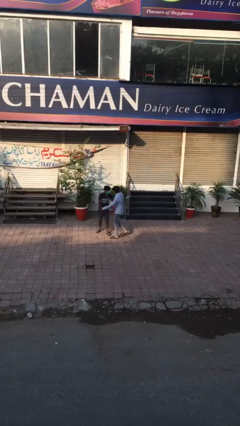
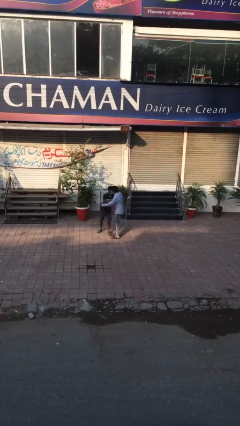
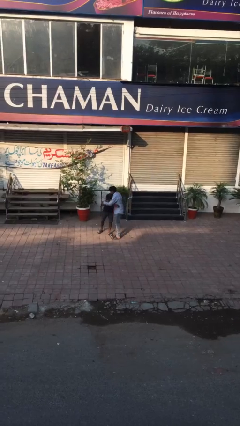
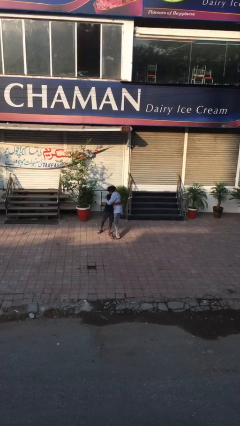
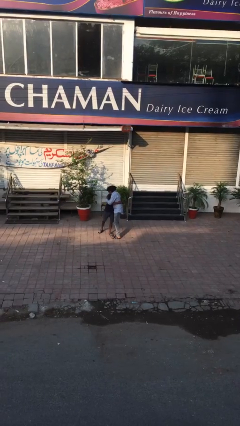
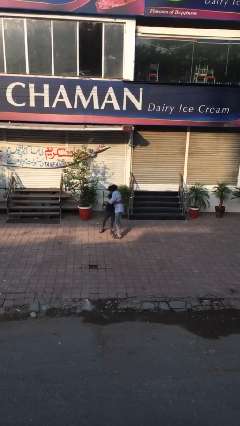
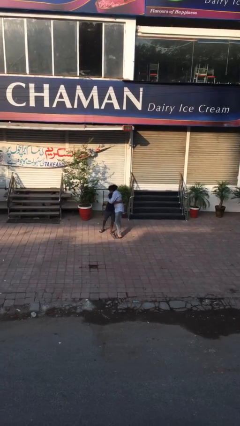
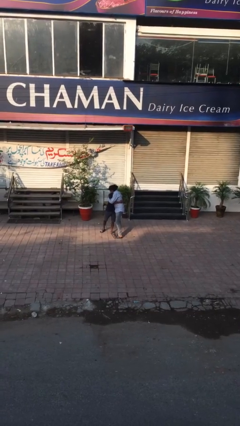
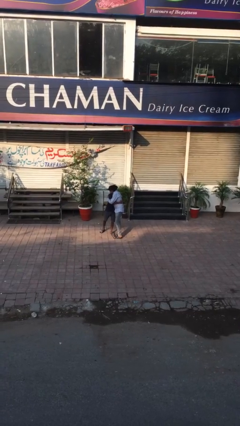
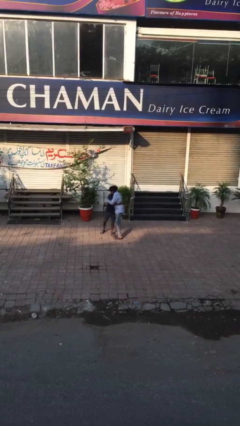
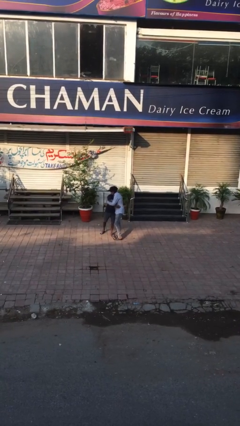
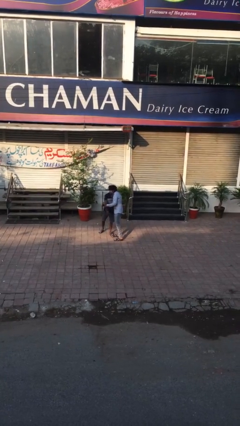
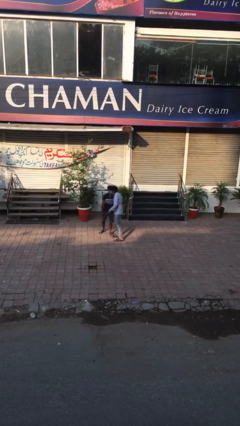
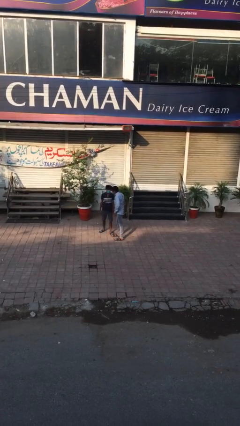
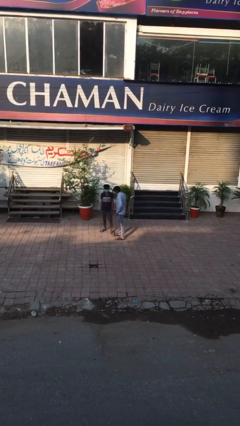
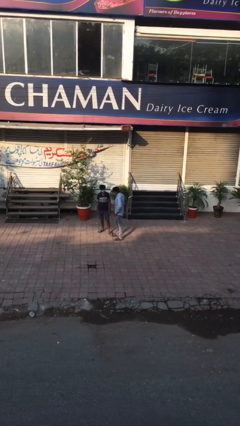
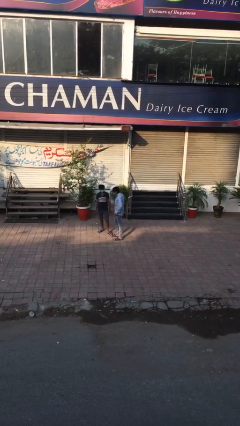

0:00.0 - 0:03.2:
person embraces person

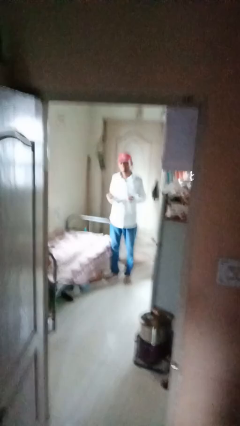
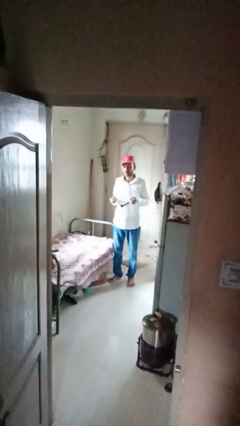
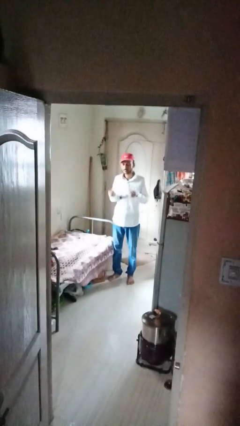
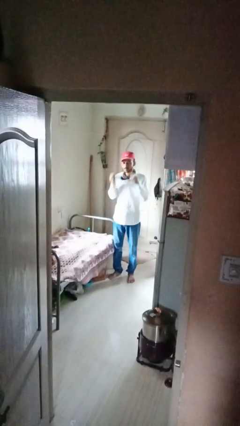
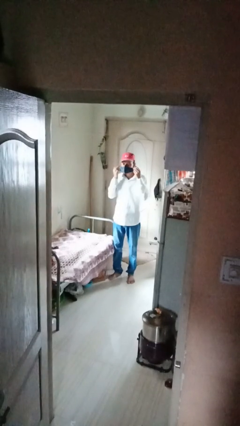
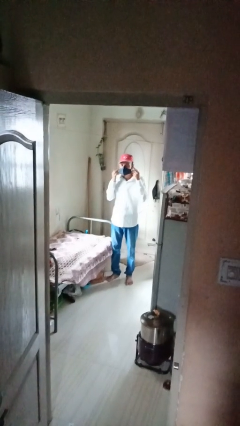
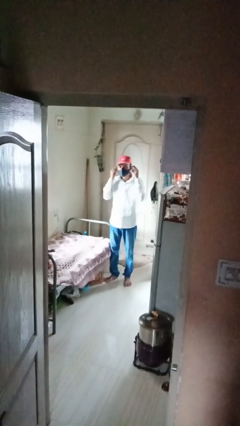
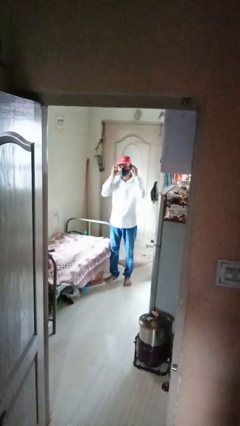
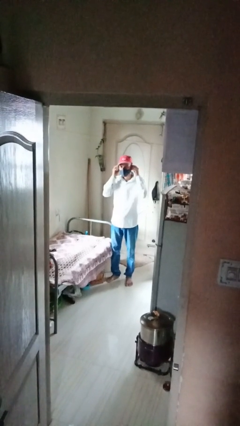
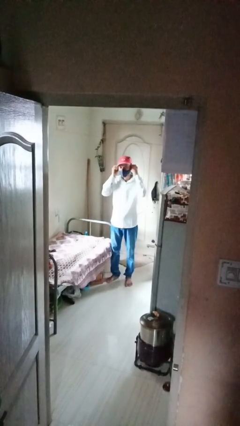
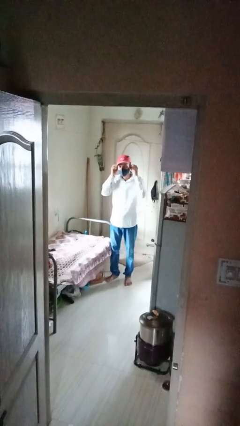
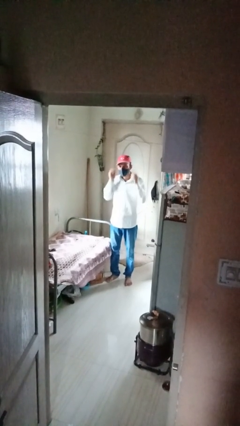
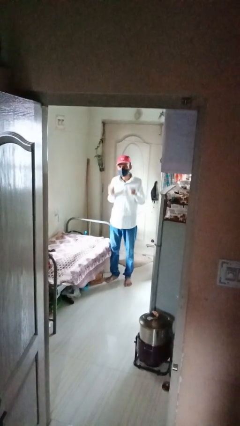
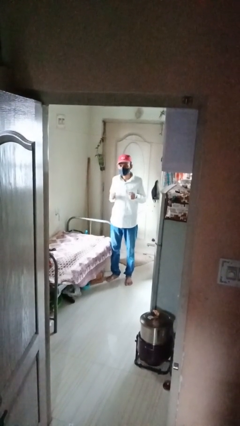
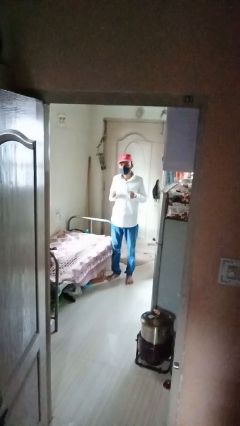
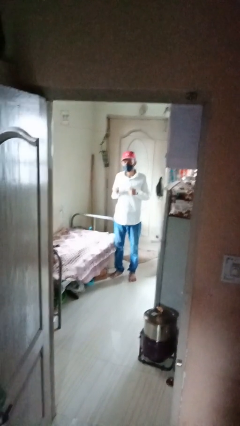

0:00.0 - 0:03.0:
person puts on facemask

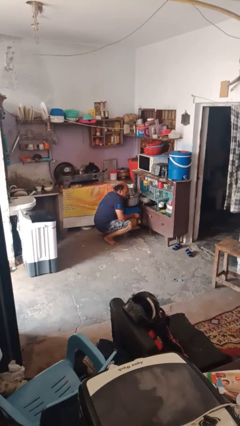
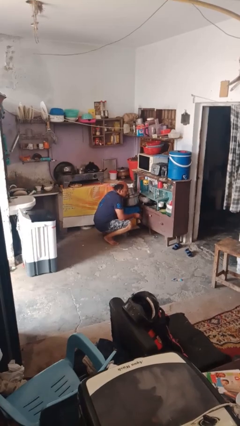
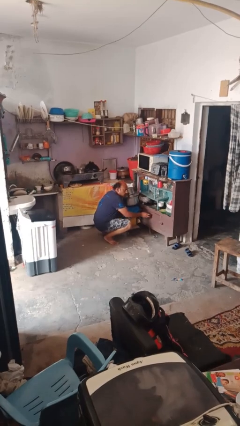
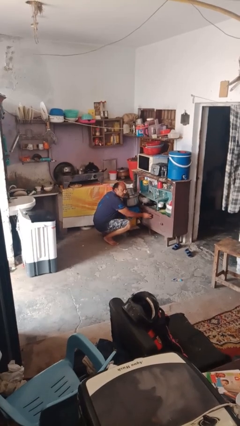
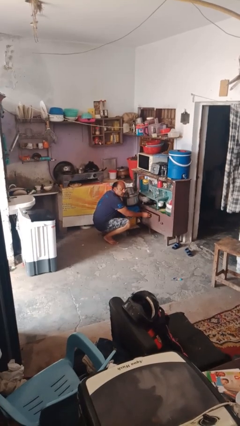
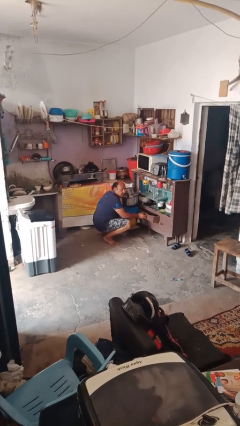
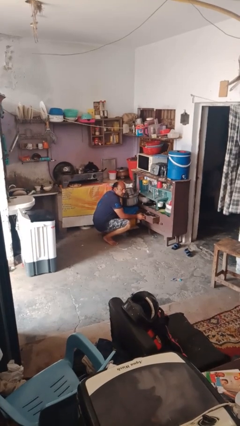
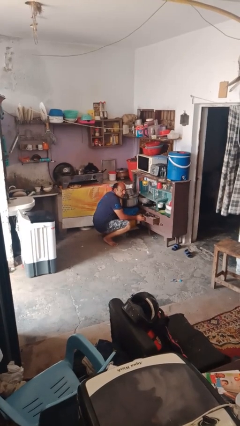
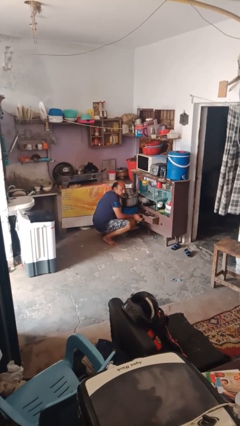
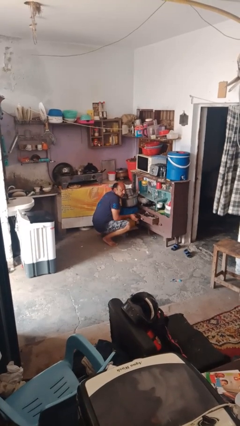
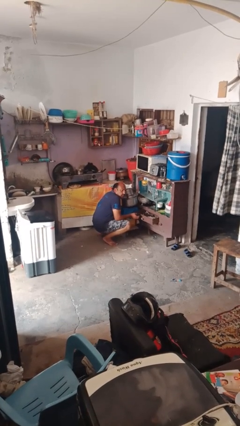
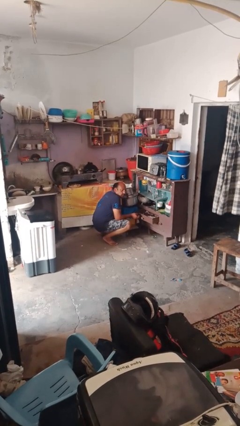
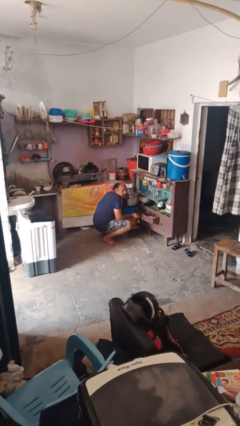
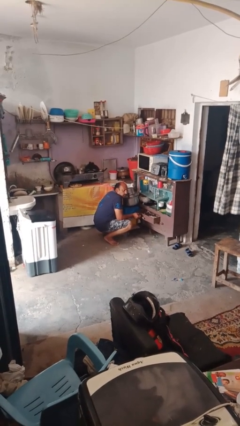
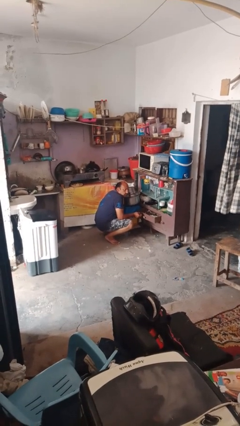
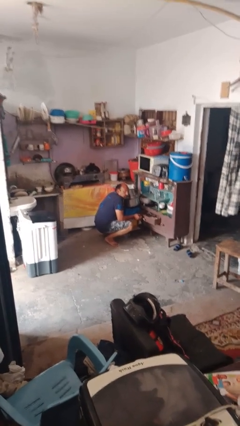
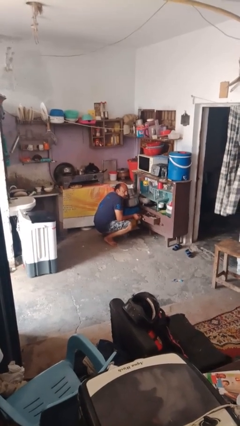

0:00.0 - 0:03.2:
person opens kitchen drawer

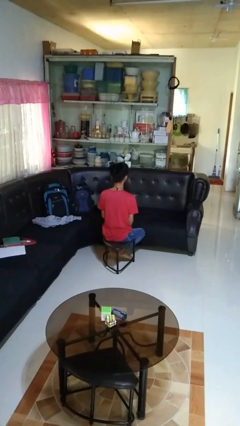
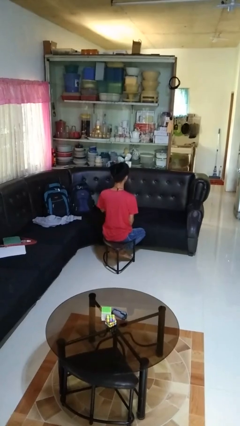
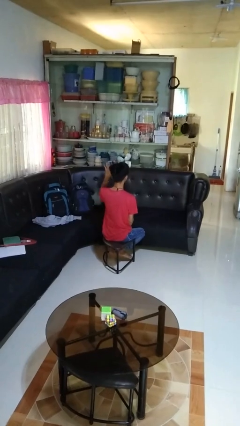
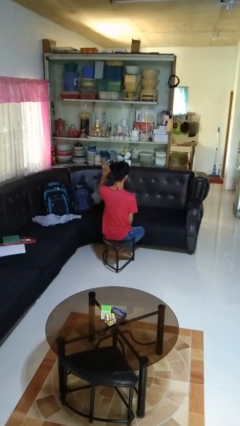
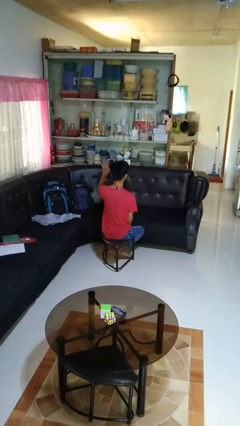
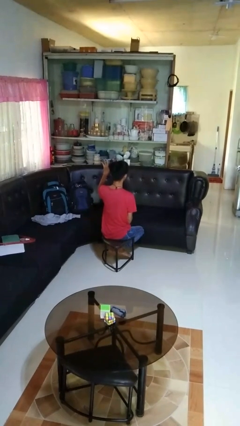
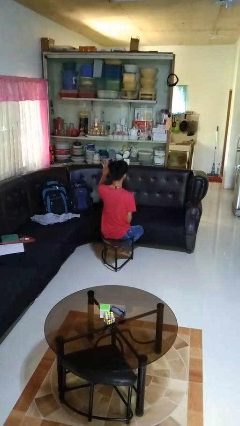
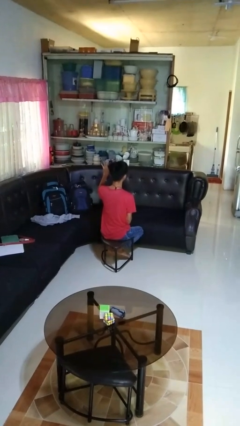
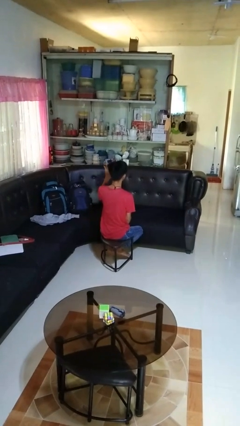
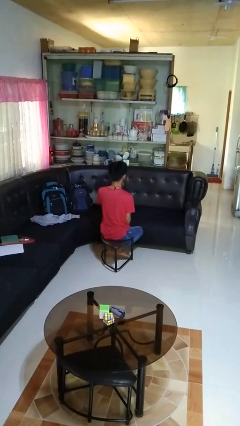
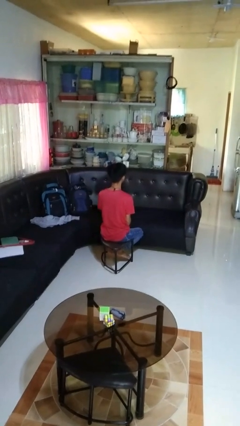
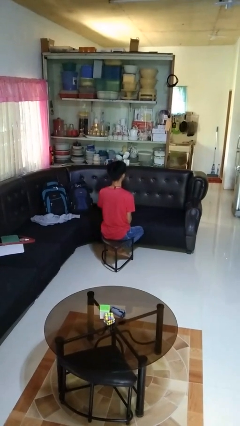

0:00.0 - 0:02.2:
person gestures number five

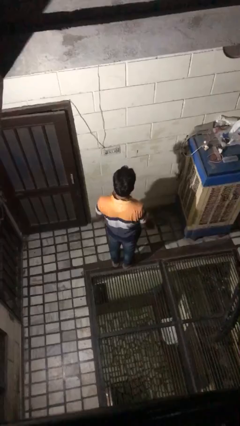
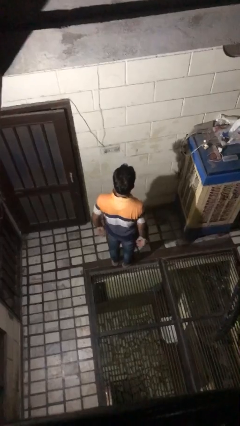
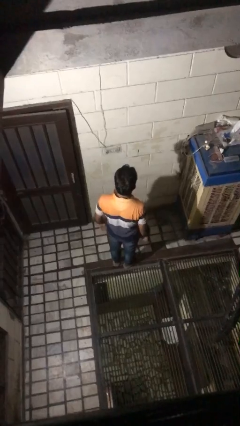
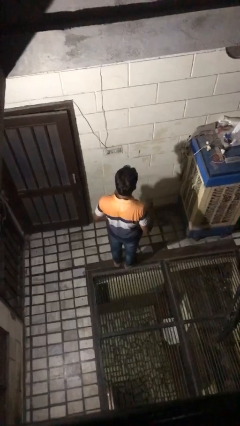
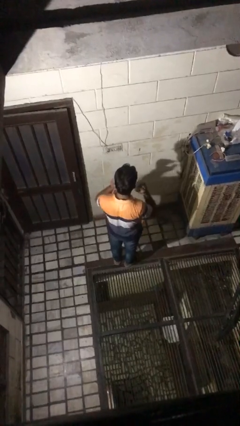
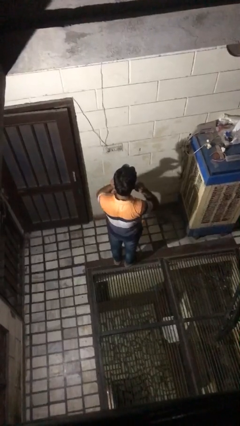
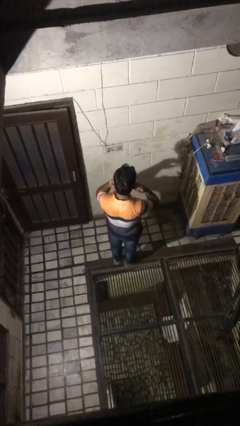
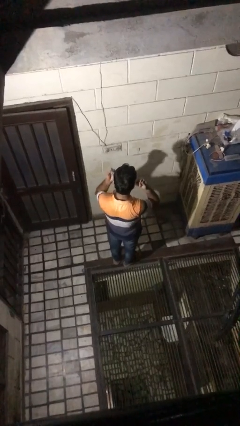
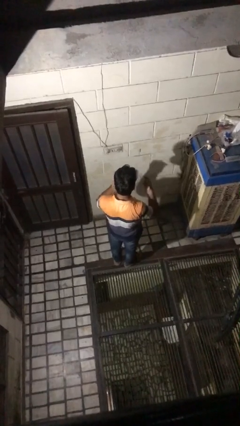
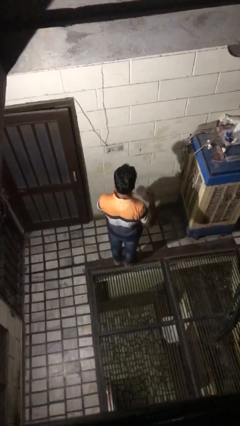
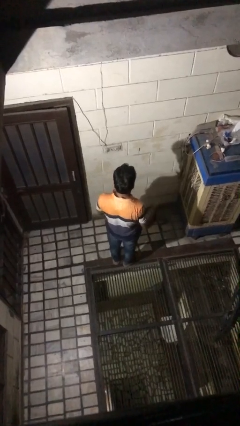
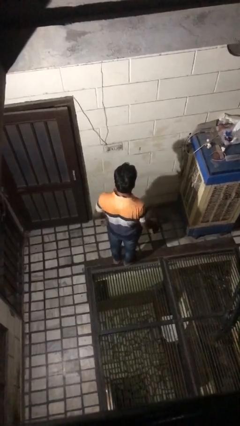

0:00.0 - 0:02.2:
person takes off facemask

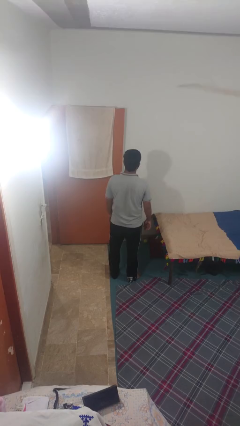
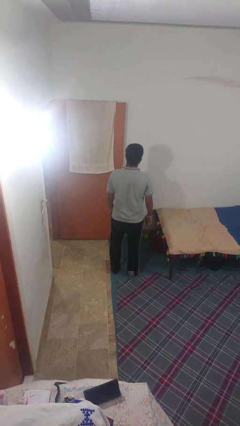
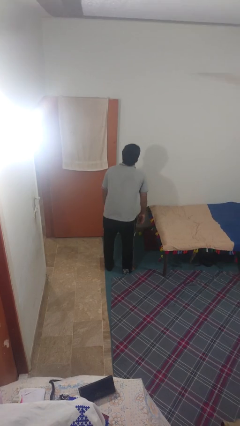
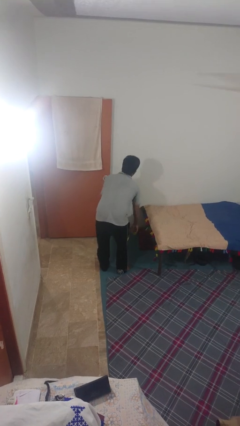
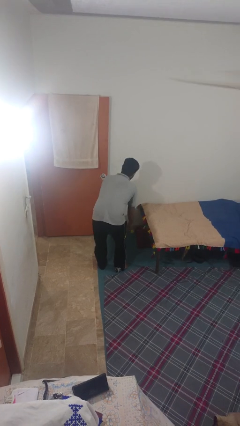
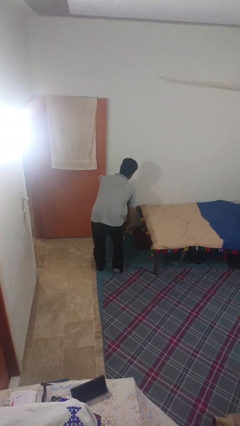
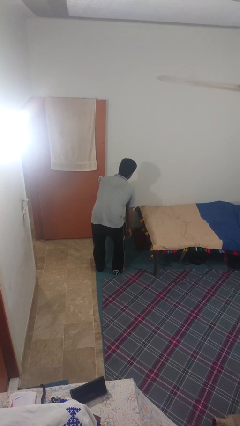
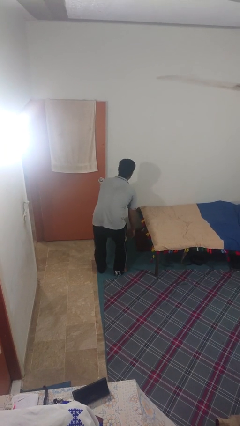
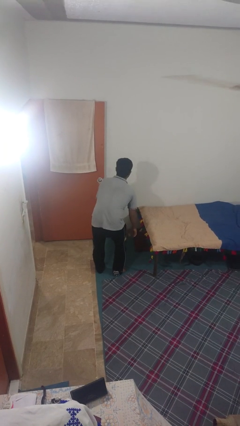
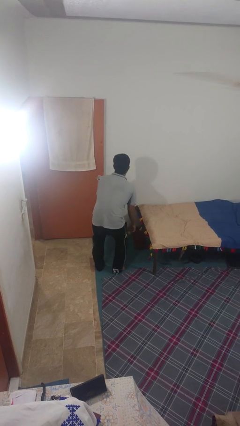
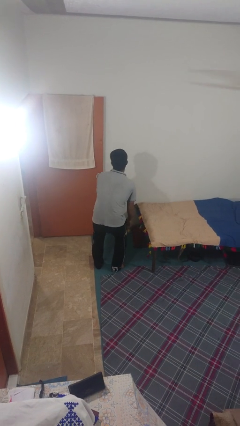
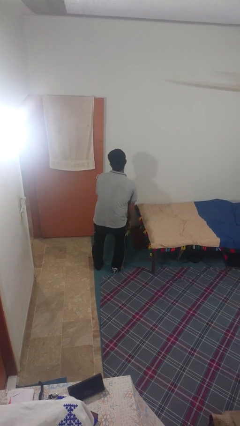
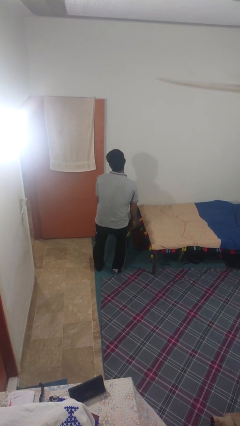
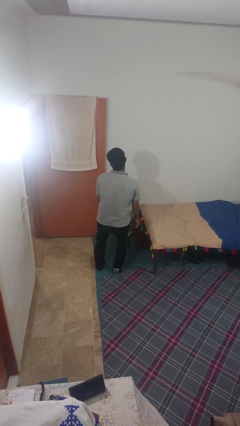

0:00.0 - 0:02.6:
person gestures hang loose

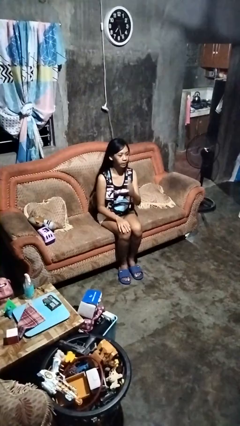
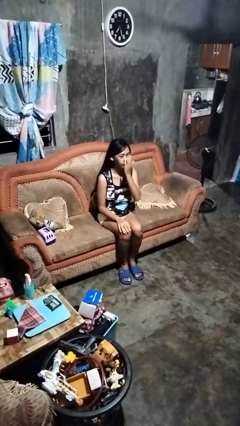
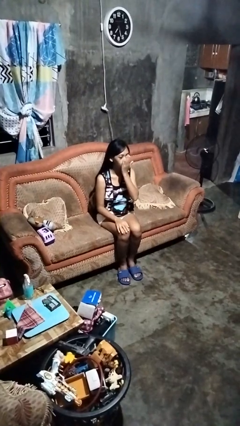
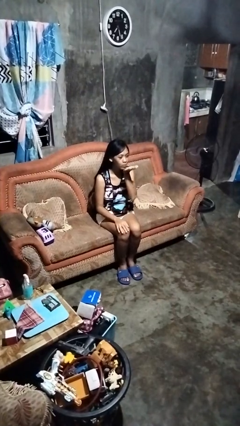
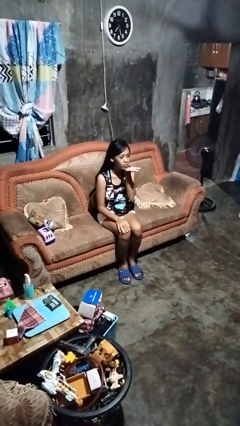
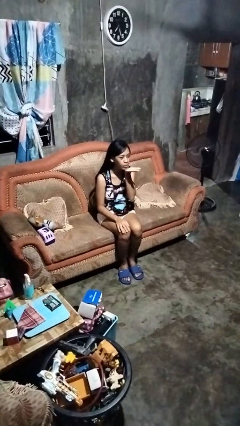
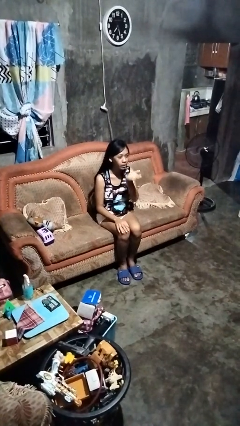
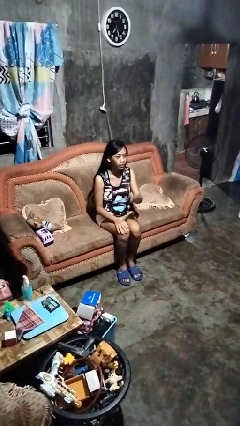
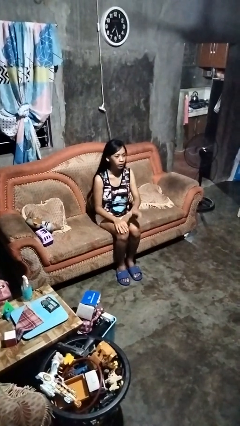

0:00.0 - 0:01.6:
person gestures blow kiss
